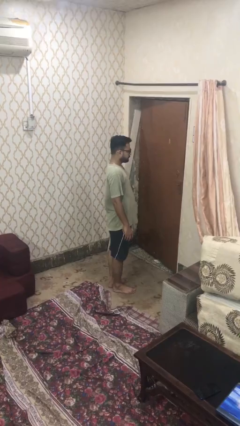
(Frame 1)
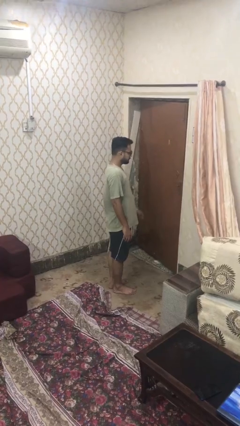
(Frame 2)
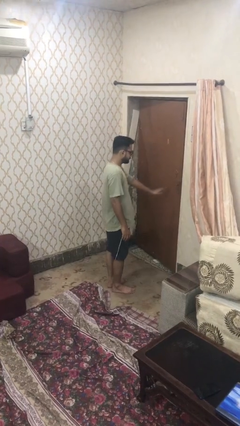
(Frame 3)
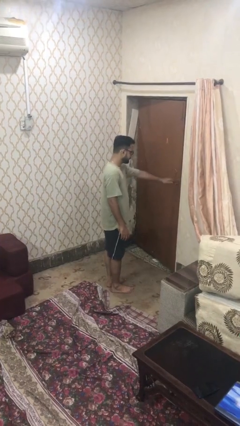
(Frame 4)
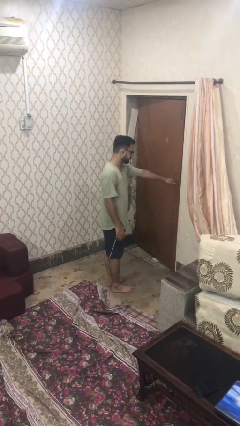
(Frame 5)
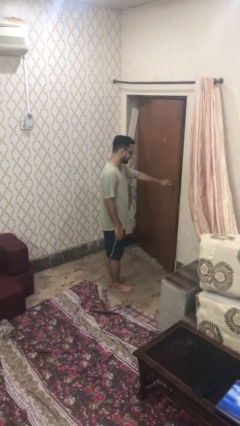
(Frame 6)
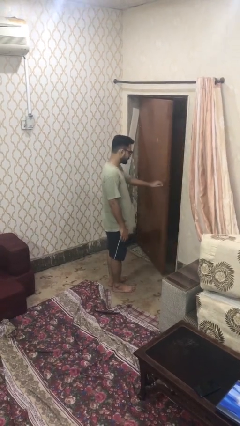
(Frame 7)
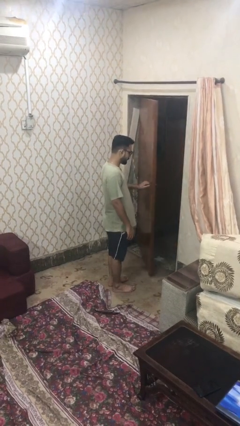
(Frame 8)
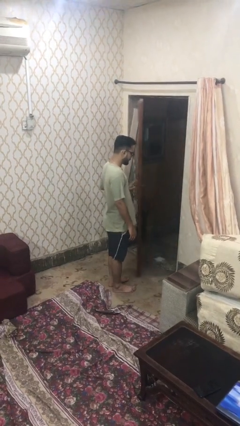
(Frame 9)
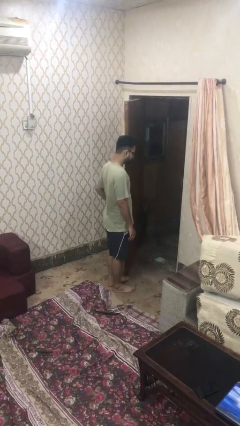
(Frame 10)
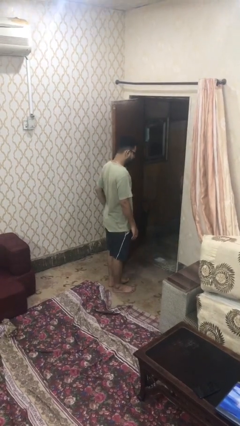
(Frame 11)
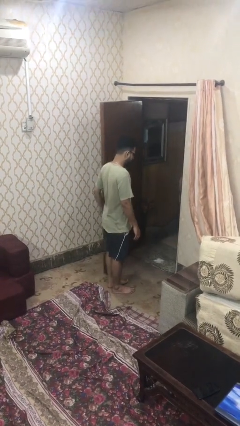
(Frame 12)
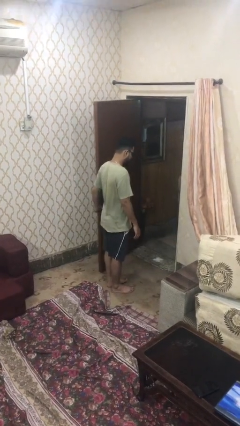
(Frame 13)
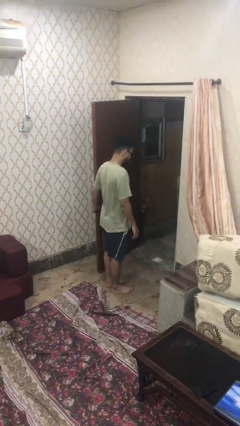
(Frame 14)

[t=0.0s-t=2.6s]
person opens facility door

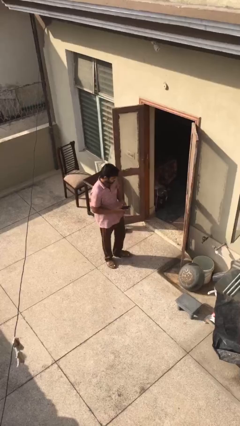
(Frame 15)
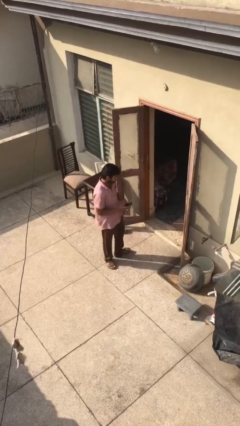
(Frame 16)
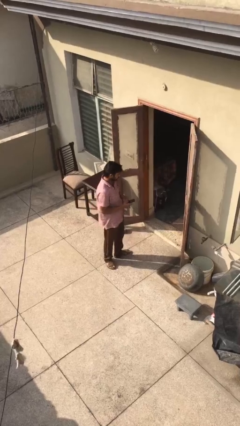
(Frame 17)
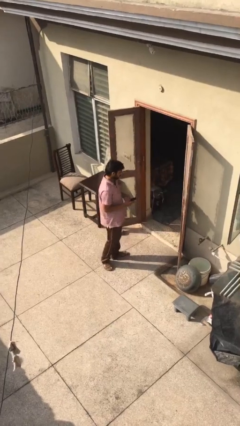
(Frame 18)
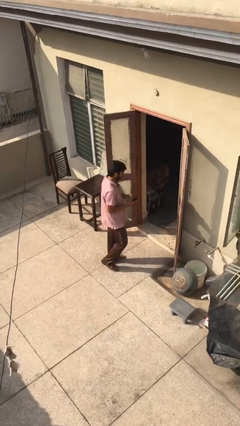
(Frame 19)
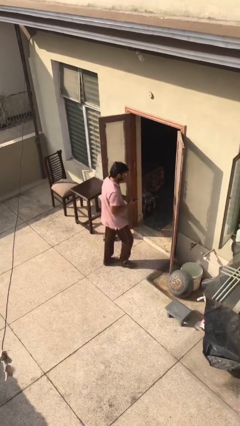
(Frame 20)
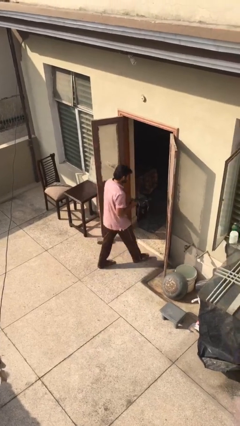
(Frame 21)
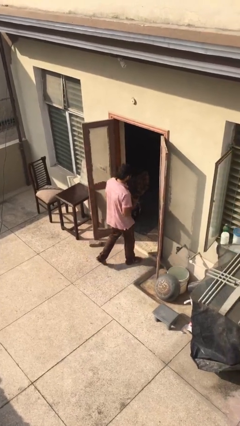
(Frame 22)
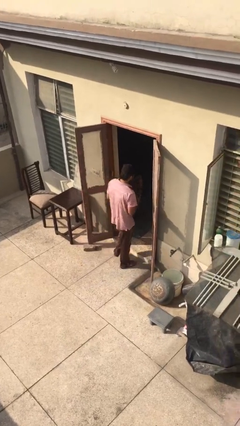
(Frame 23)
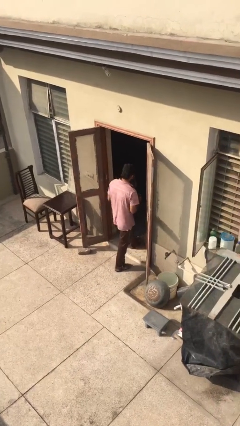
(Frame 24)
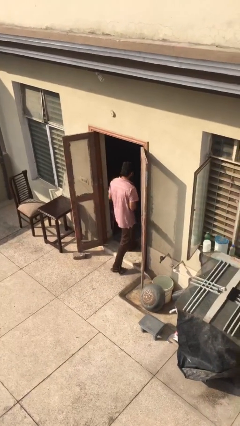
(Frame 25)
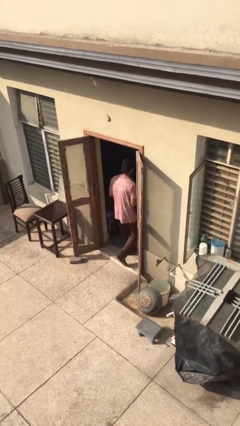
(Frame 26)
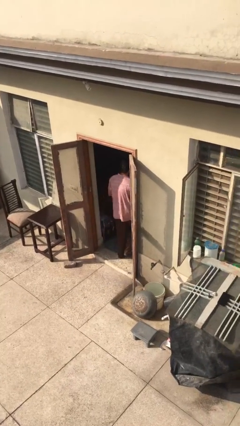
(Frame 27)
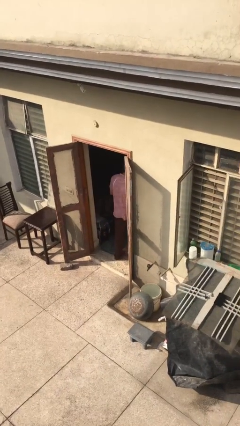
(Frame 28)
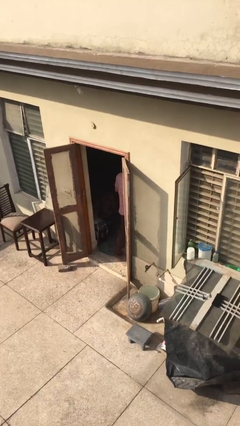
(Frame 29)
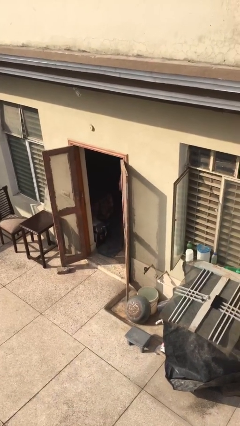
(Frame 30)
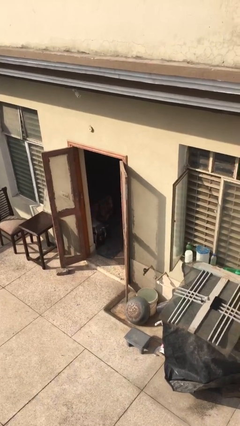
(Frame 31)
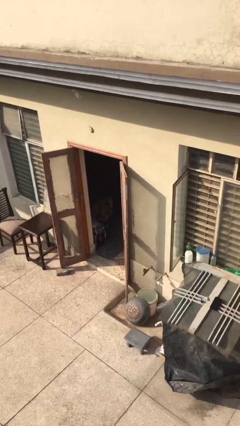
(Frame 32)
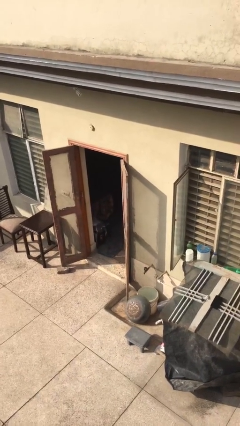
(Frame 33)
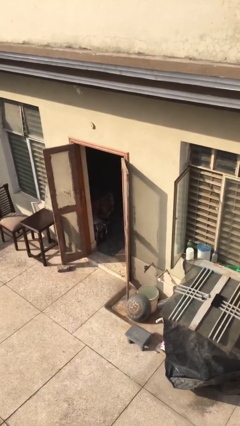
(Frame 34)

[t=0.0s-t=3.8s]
person exits scene through structure

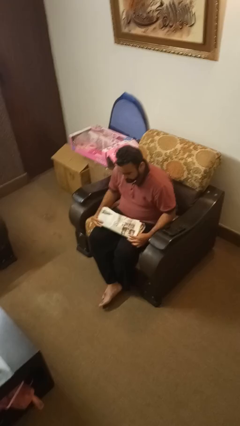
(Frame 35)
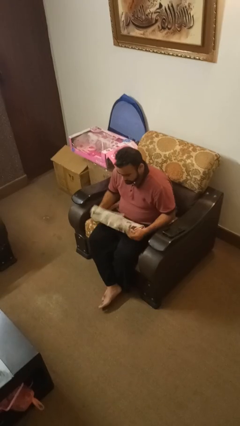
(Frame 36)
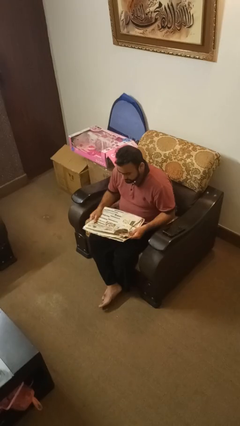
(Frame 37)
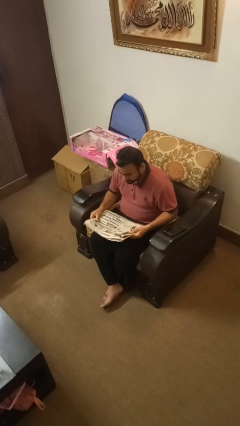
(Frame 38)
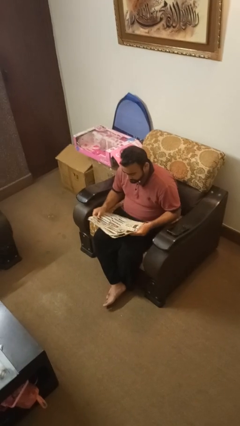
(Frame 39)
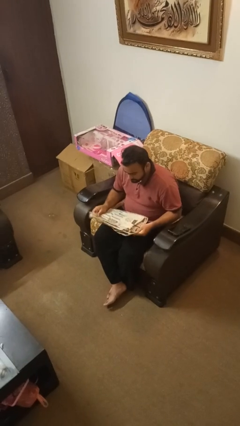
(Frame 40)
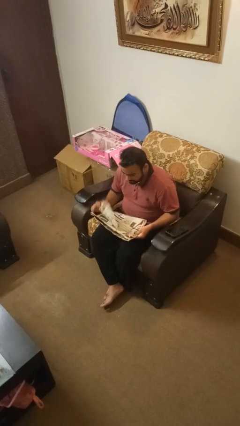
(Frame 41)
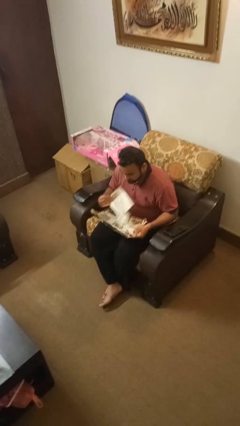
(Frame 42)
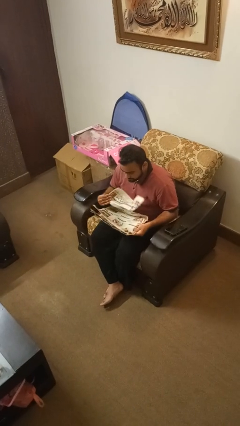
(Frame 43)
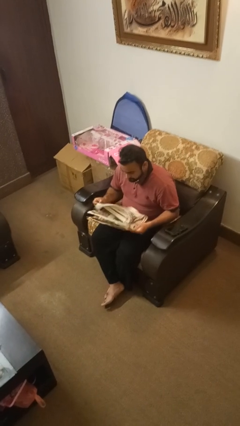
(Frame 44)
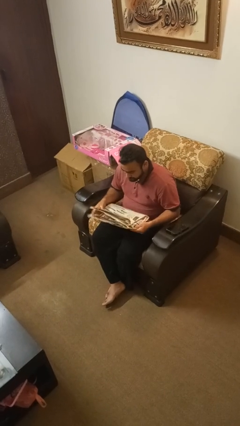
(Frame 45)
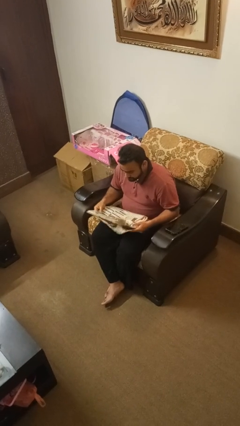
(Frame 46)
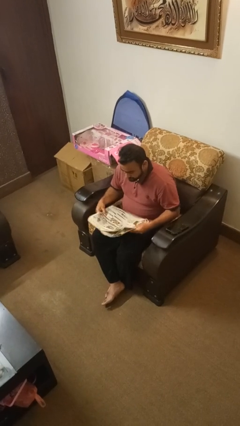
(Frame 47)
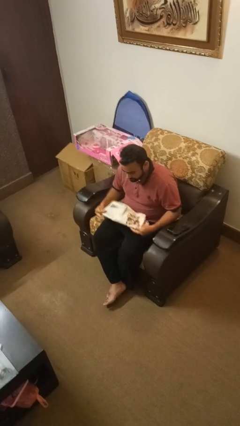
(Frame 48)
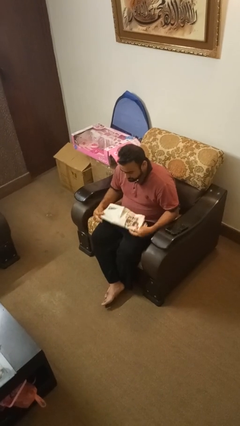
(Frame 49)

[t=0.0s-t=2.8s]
person reads newspaper

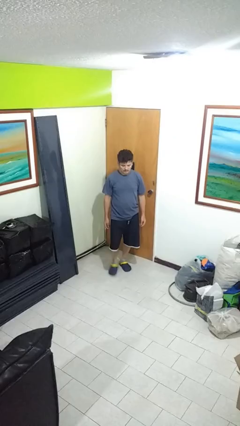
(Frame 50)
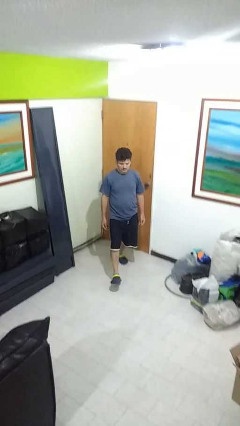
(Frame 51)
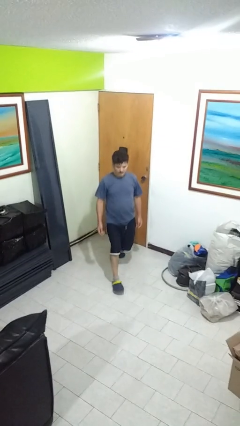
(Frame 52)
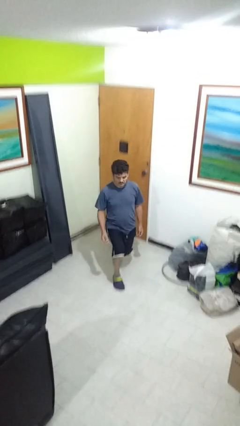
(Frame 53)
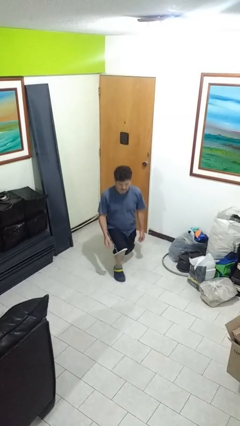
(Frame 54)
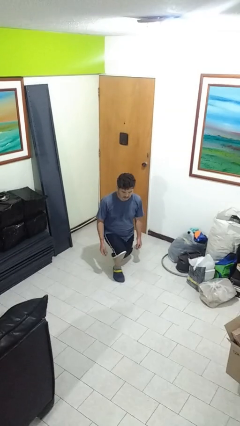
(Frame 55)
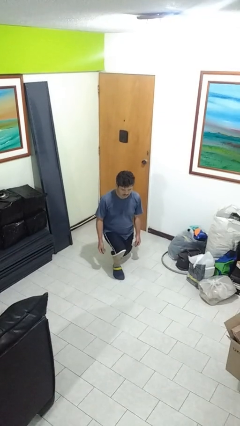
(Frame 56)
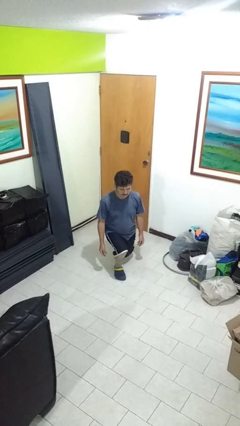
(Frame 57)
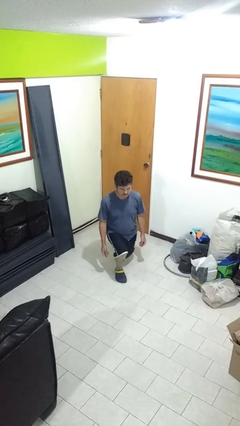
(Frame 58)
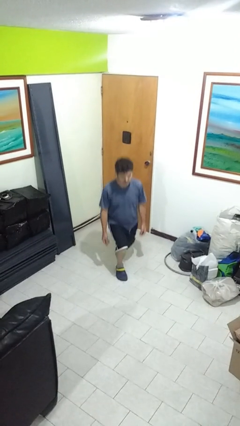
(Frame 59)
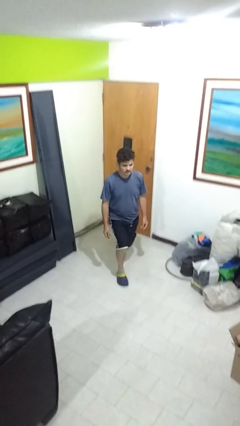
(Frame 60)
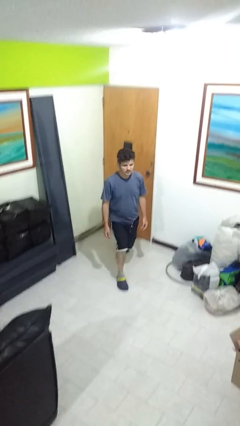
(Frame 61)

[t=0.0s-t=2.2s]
person exercises with lunges

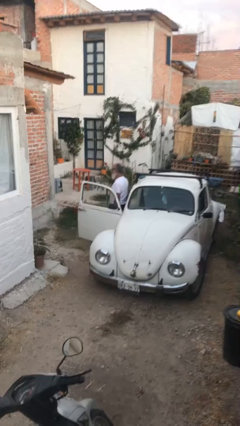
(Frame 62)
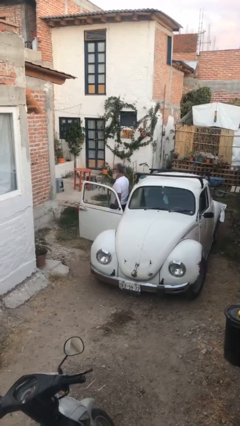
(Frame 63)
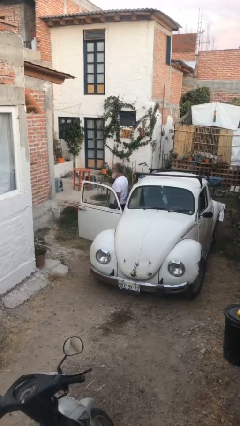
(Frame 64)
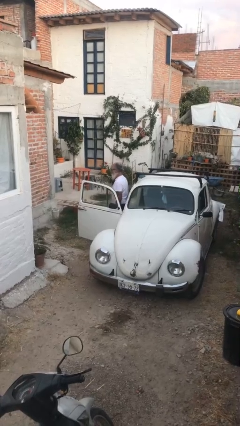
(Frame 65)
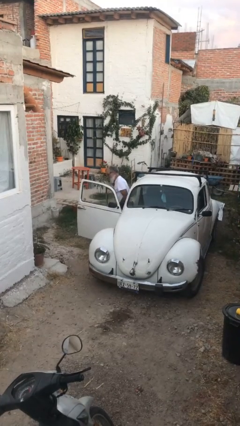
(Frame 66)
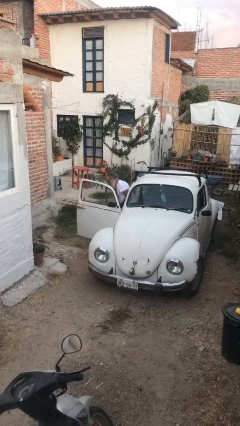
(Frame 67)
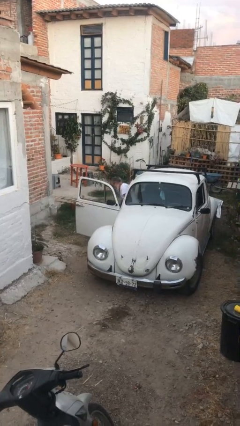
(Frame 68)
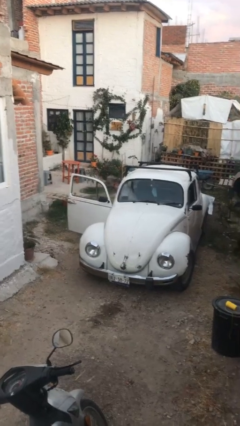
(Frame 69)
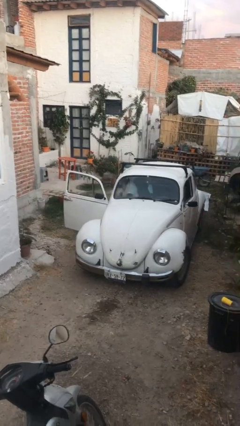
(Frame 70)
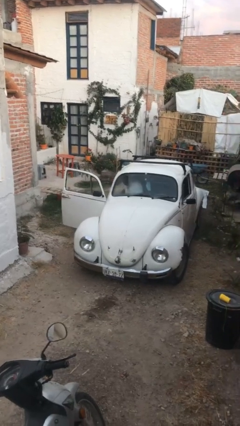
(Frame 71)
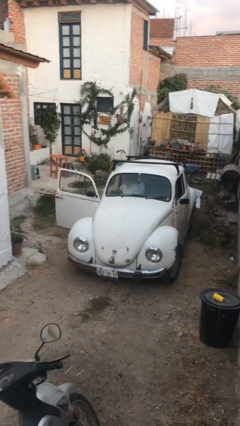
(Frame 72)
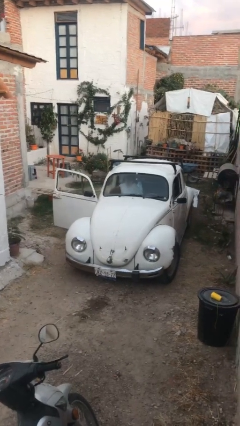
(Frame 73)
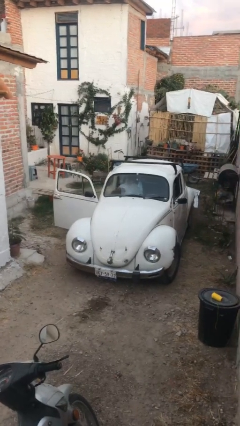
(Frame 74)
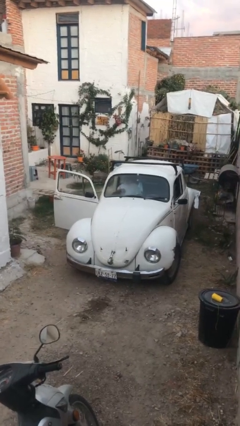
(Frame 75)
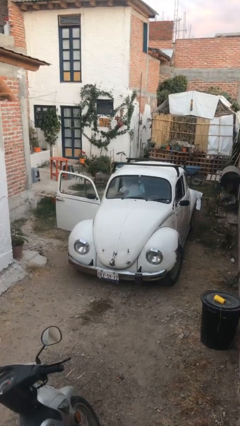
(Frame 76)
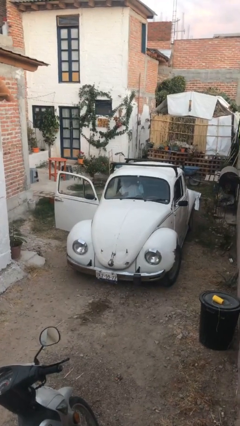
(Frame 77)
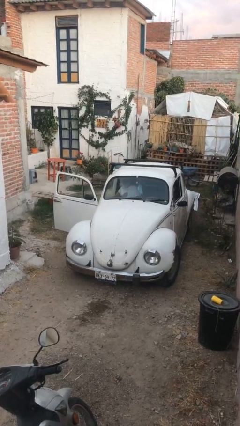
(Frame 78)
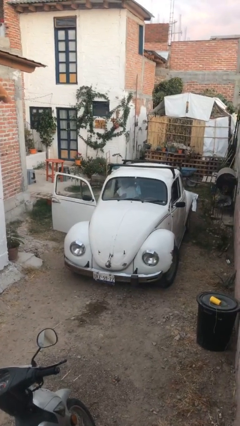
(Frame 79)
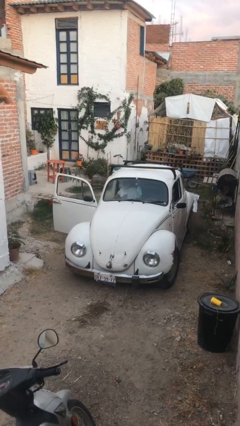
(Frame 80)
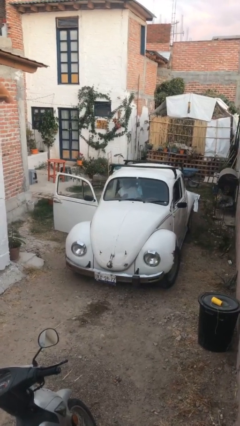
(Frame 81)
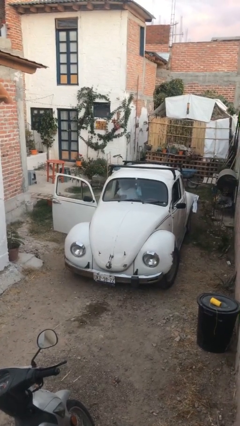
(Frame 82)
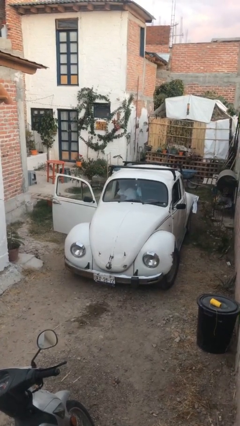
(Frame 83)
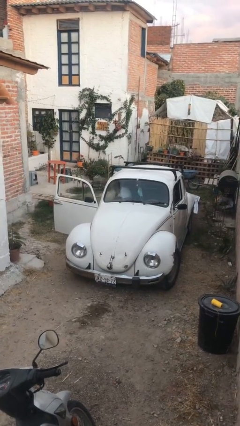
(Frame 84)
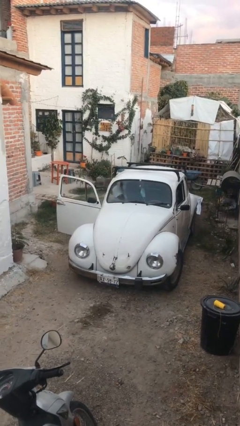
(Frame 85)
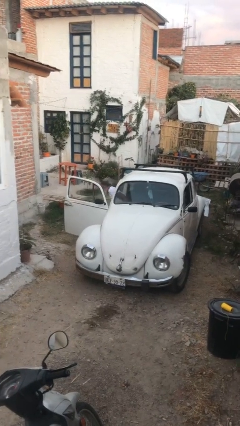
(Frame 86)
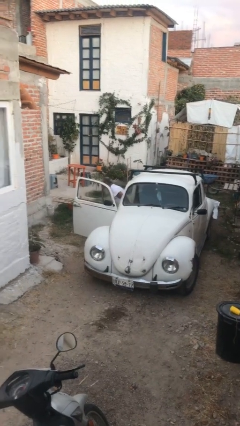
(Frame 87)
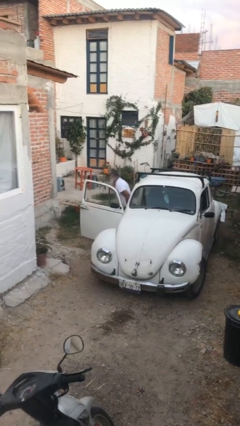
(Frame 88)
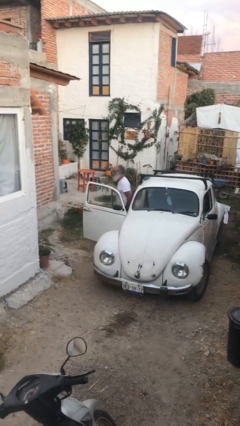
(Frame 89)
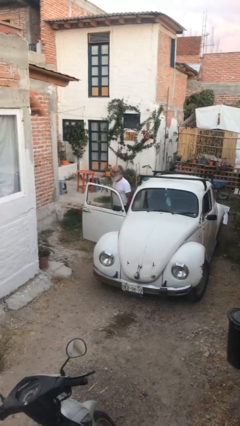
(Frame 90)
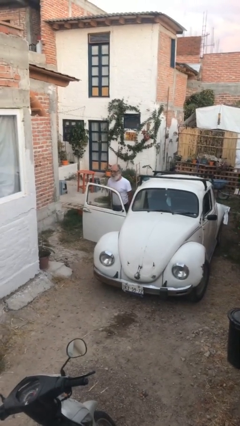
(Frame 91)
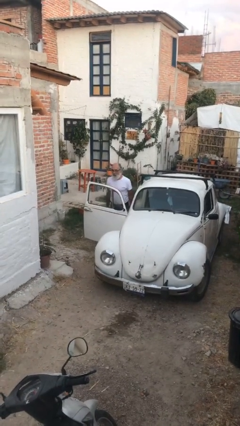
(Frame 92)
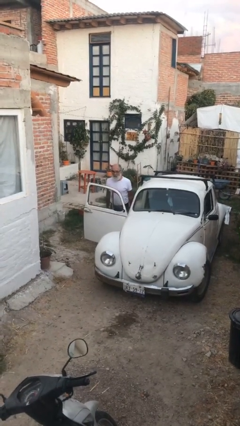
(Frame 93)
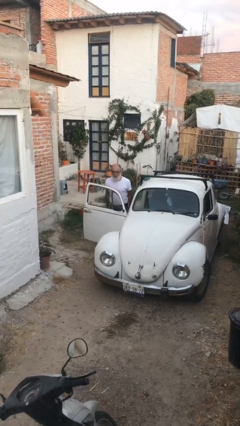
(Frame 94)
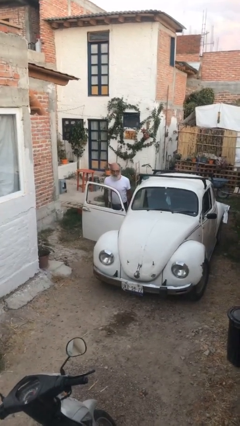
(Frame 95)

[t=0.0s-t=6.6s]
person enters car
